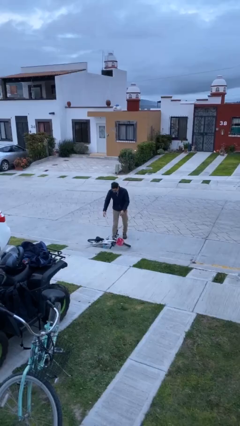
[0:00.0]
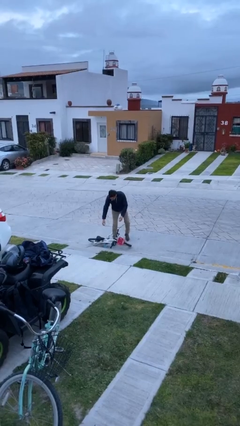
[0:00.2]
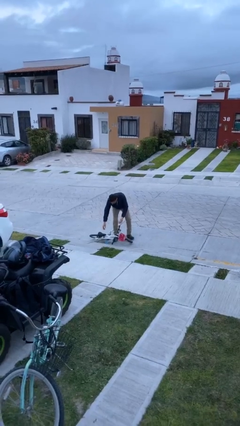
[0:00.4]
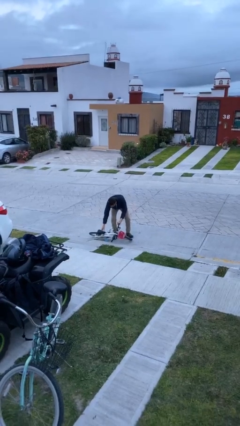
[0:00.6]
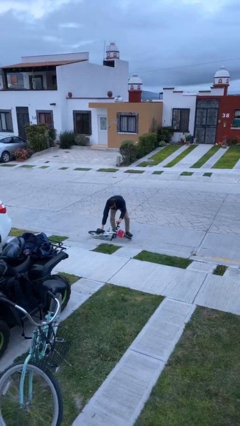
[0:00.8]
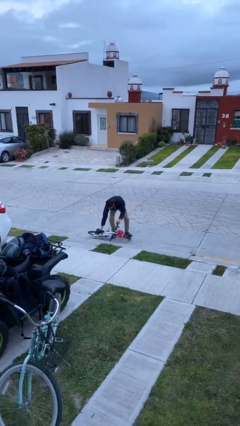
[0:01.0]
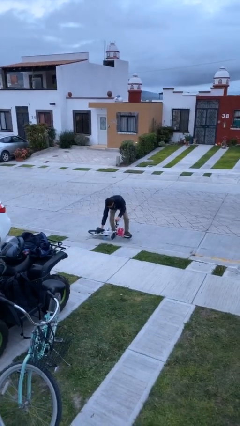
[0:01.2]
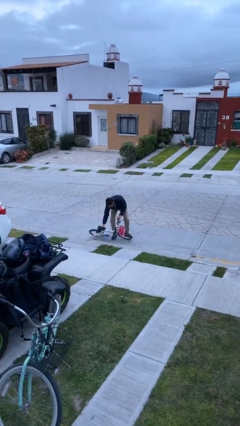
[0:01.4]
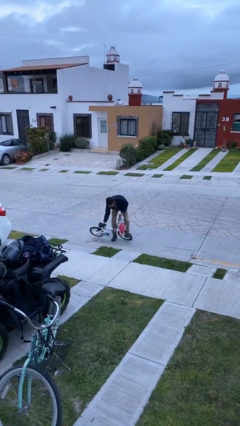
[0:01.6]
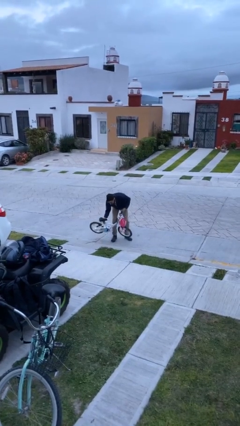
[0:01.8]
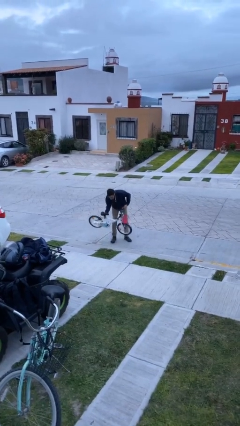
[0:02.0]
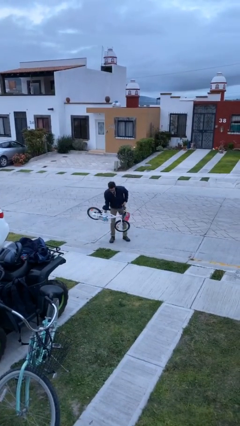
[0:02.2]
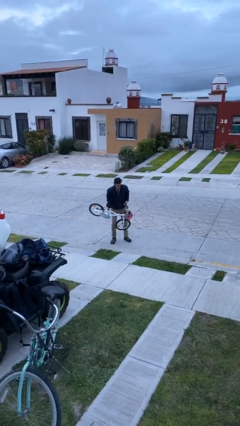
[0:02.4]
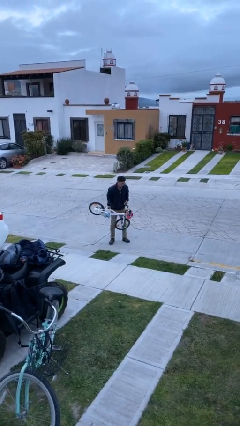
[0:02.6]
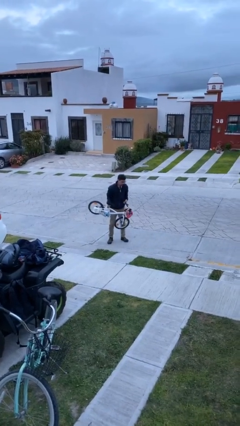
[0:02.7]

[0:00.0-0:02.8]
person picks up object from floor

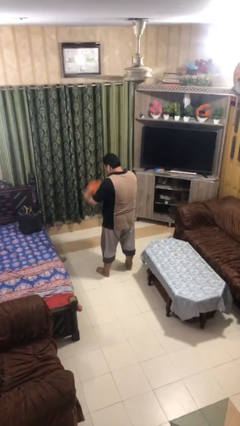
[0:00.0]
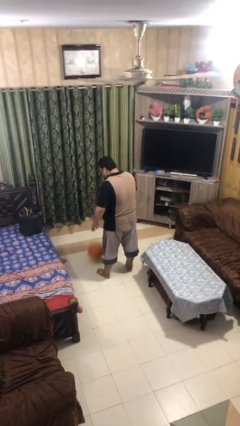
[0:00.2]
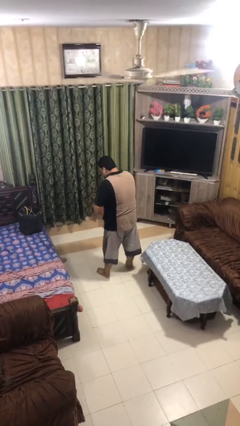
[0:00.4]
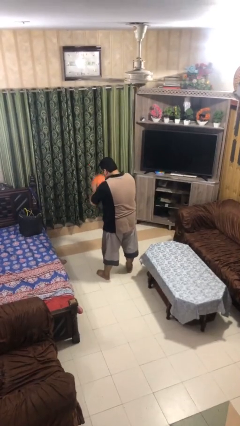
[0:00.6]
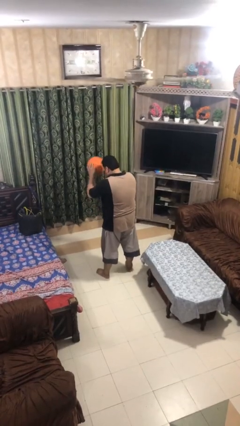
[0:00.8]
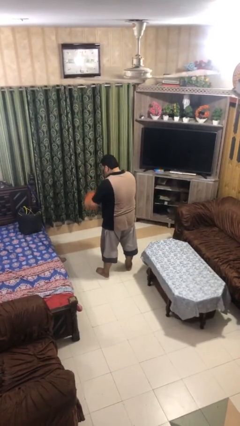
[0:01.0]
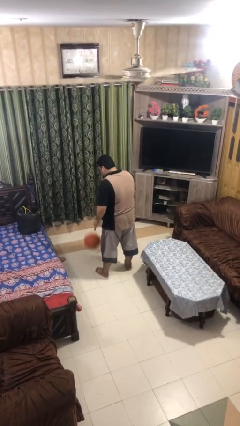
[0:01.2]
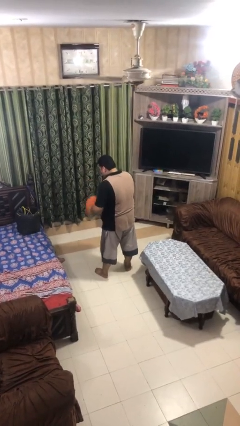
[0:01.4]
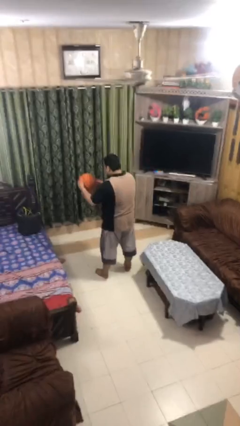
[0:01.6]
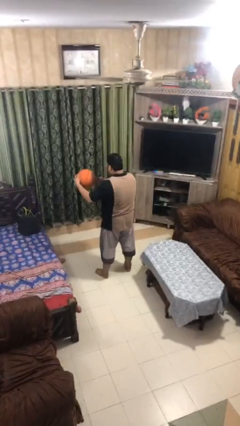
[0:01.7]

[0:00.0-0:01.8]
person bounces ball on floor

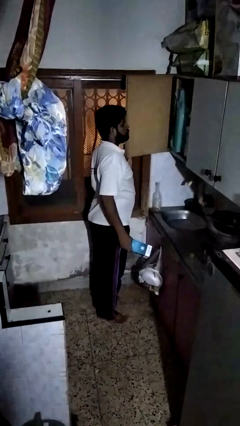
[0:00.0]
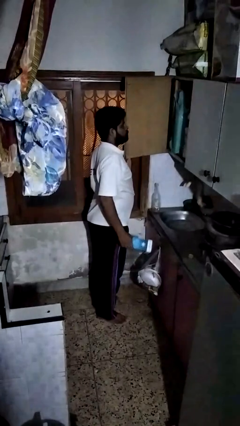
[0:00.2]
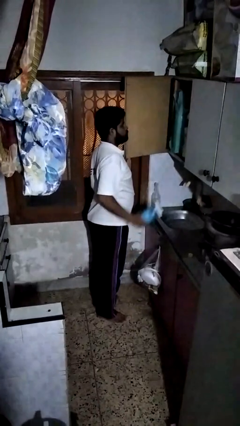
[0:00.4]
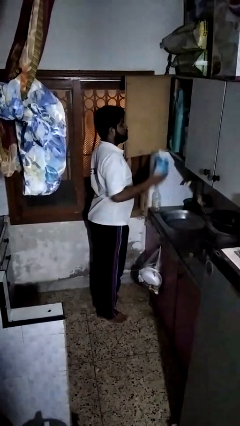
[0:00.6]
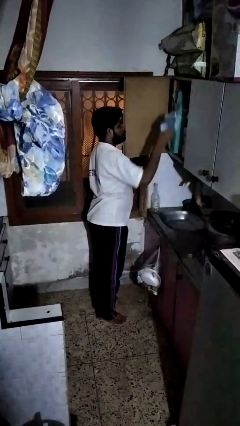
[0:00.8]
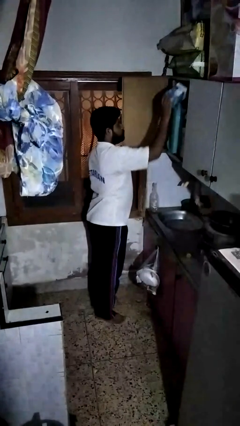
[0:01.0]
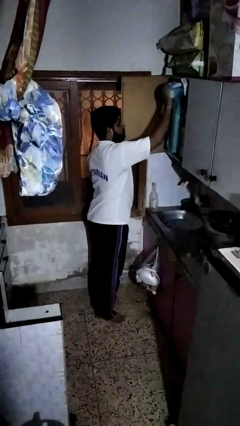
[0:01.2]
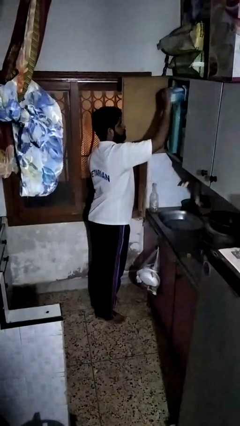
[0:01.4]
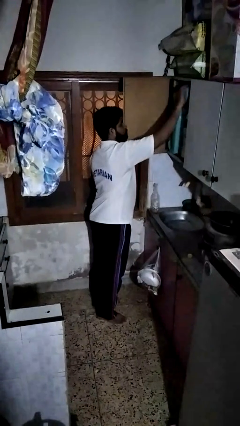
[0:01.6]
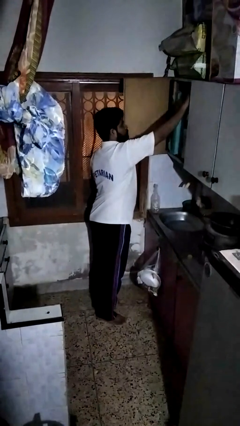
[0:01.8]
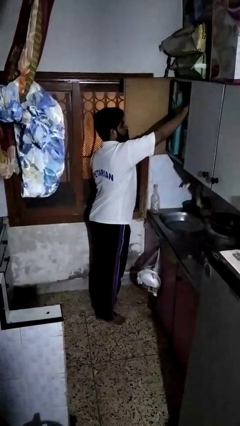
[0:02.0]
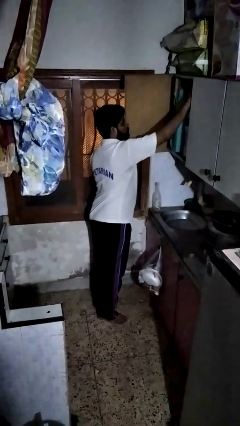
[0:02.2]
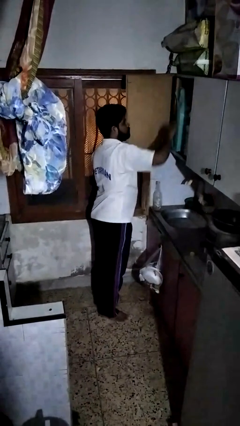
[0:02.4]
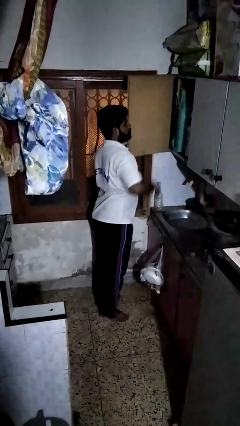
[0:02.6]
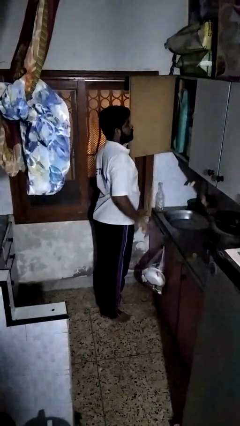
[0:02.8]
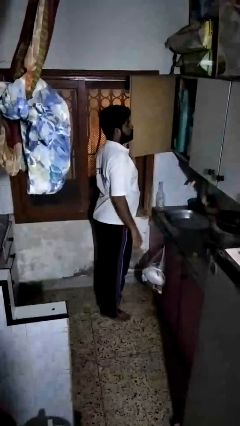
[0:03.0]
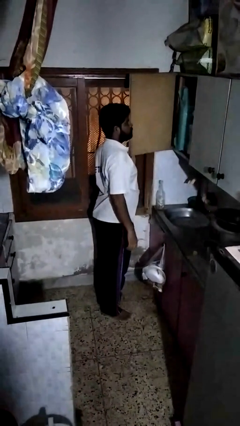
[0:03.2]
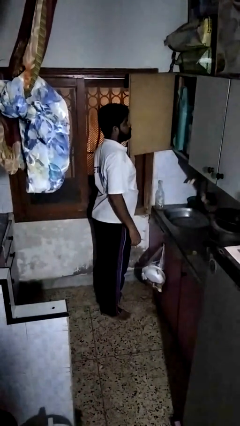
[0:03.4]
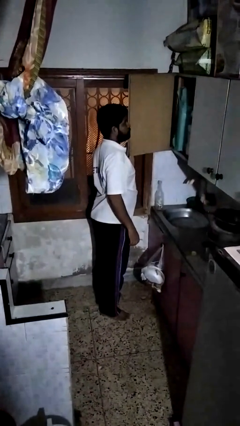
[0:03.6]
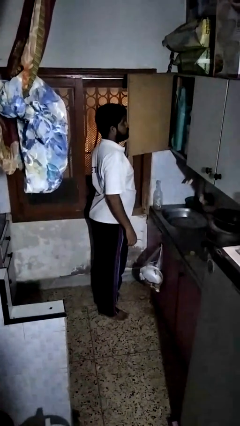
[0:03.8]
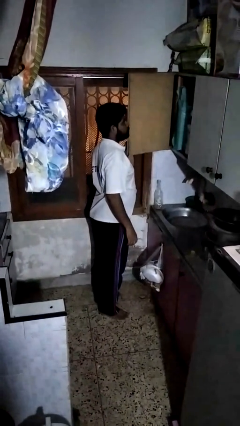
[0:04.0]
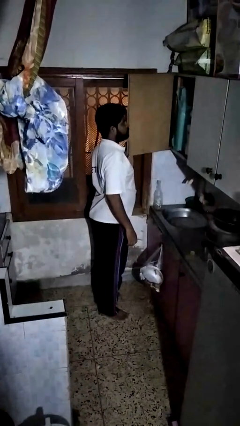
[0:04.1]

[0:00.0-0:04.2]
person puts down object into cabinet

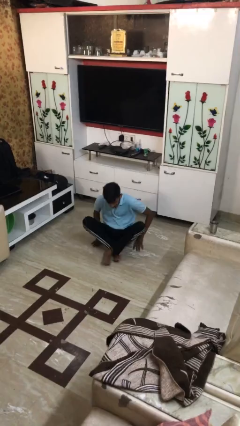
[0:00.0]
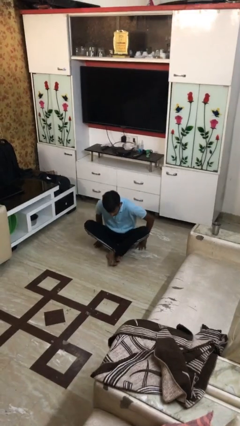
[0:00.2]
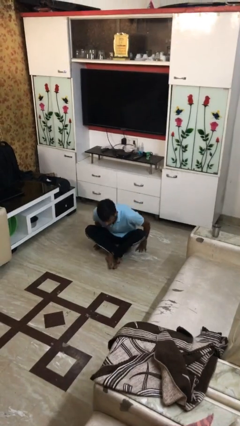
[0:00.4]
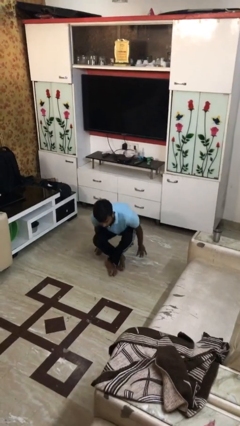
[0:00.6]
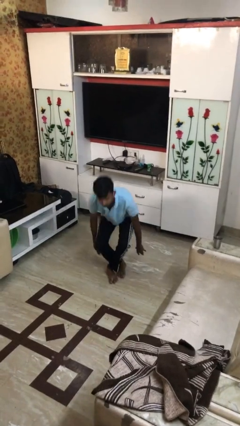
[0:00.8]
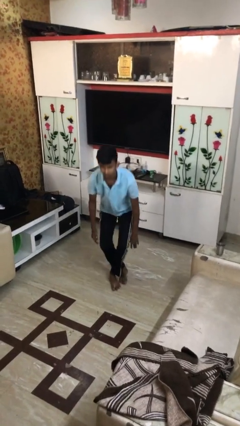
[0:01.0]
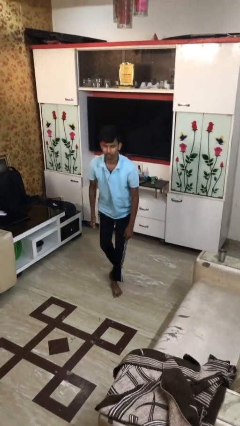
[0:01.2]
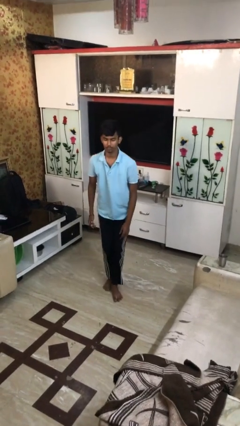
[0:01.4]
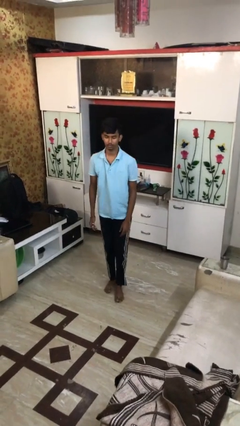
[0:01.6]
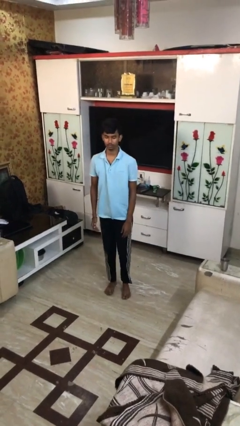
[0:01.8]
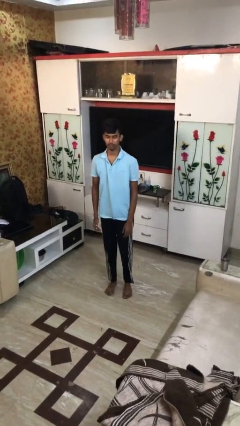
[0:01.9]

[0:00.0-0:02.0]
person stands up from floor

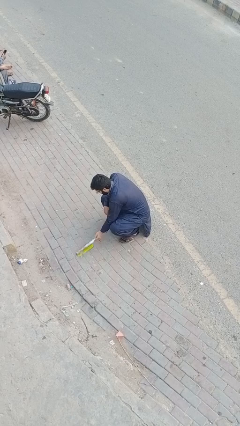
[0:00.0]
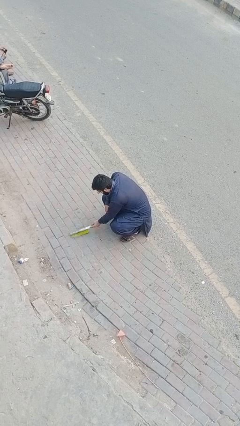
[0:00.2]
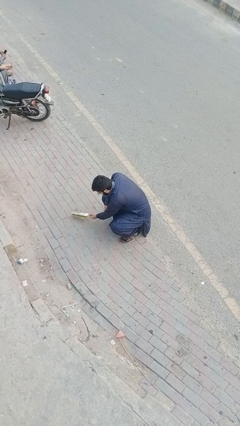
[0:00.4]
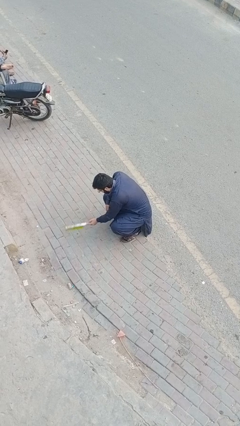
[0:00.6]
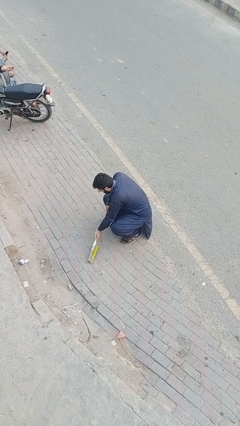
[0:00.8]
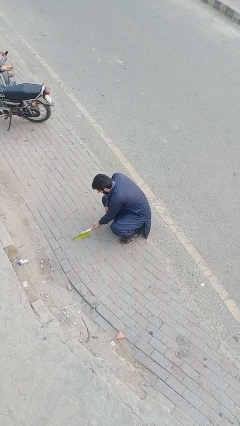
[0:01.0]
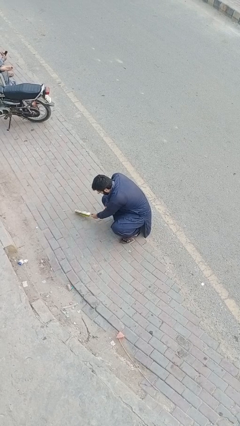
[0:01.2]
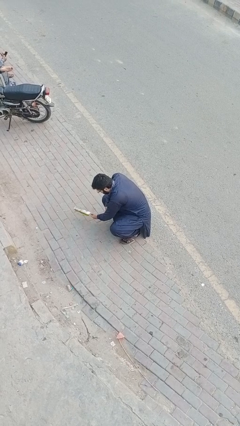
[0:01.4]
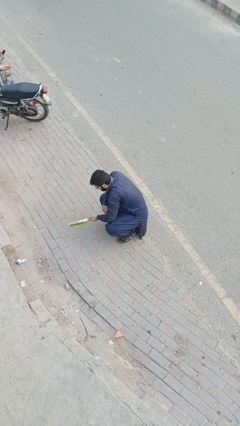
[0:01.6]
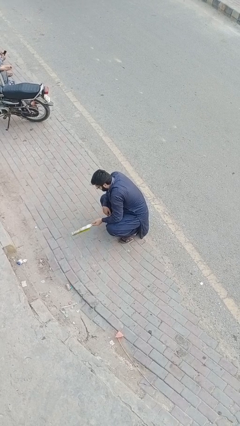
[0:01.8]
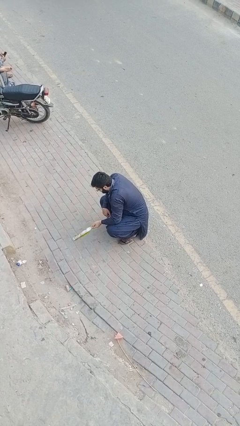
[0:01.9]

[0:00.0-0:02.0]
person sweeps floor

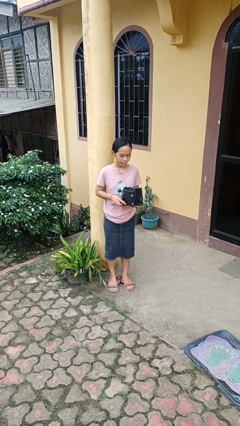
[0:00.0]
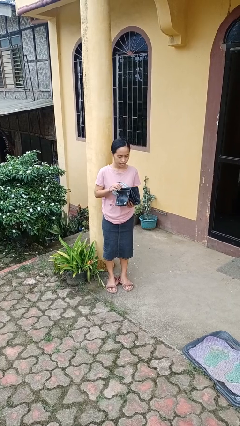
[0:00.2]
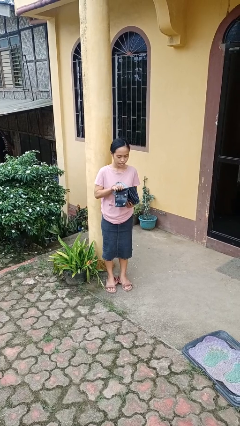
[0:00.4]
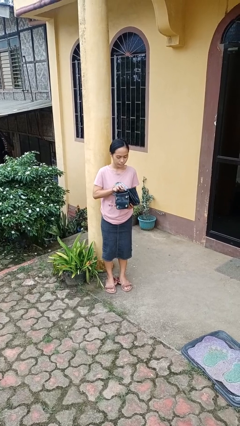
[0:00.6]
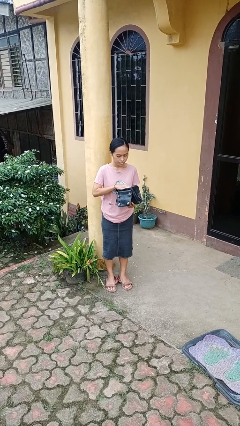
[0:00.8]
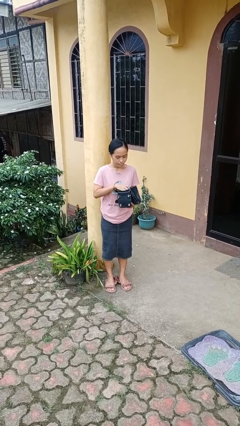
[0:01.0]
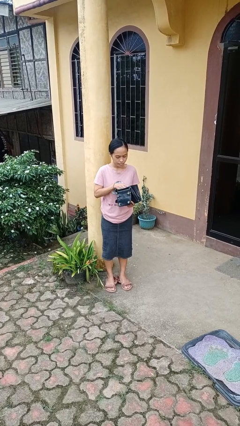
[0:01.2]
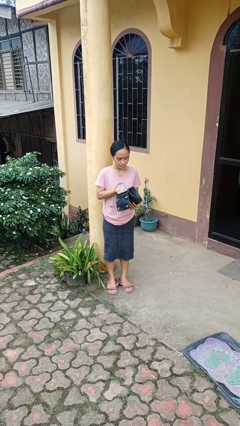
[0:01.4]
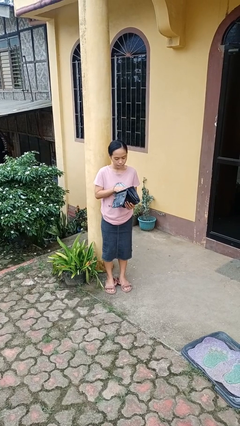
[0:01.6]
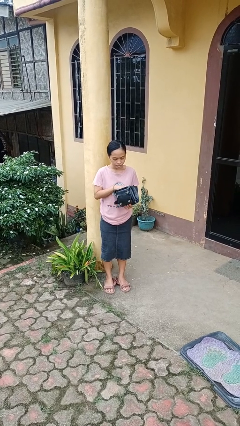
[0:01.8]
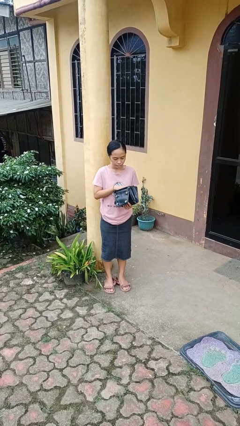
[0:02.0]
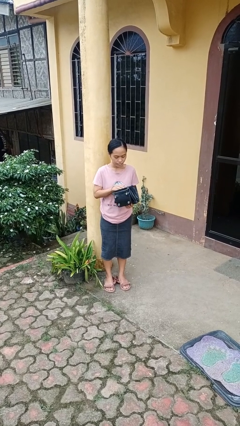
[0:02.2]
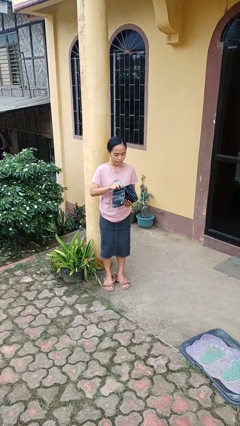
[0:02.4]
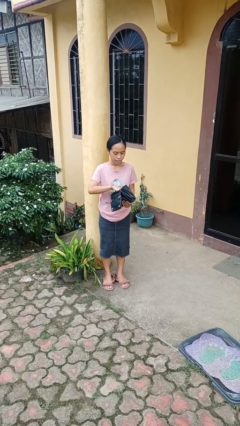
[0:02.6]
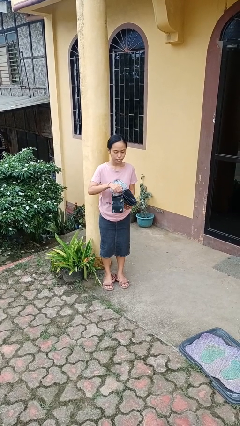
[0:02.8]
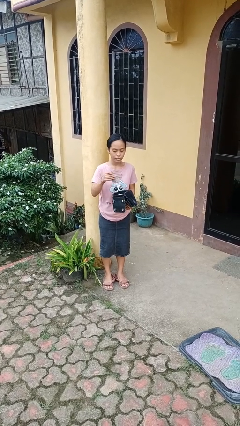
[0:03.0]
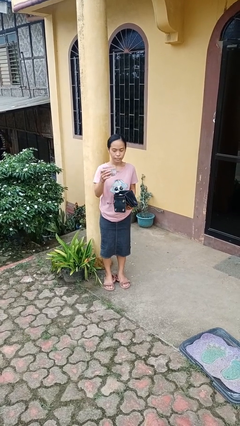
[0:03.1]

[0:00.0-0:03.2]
person searches in purse

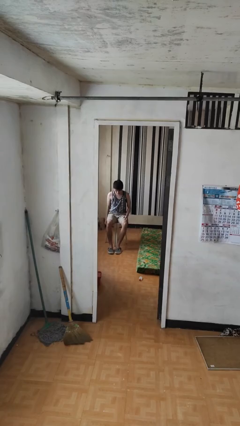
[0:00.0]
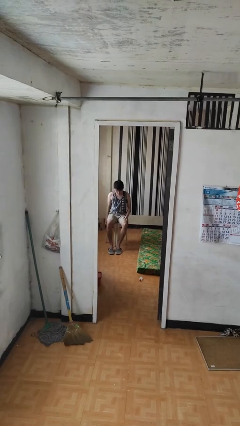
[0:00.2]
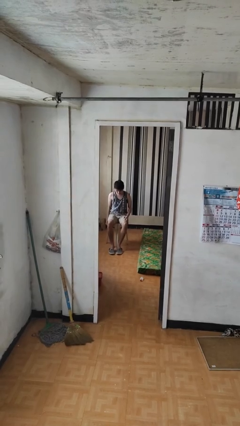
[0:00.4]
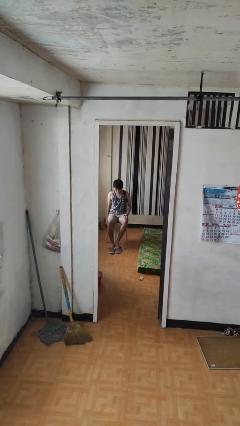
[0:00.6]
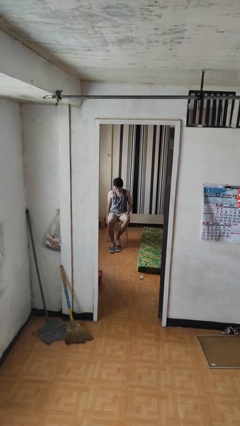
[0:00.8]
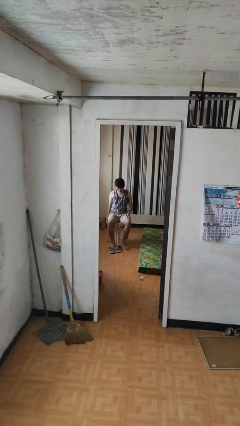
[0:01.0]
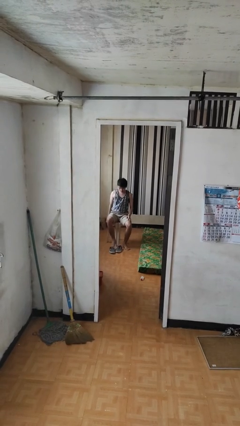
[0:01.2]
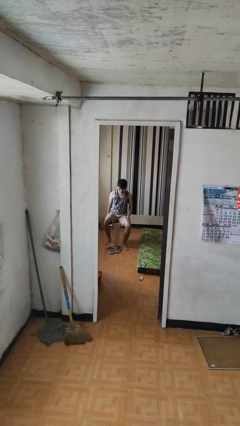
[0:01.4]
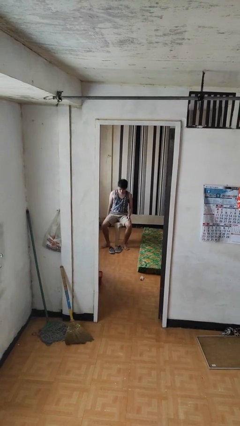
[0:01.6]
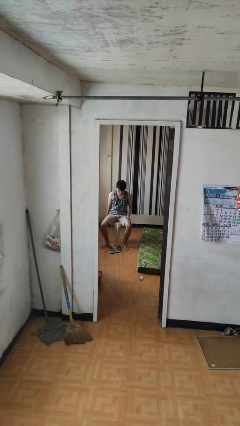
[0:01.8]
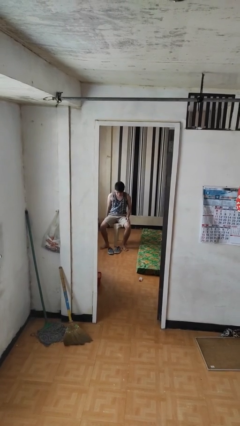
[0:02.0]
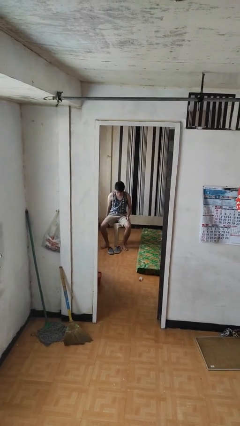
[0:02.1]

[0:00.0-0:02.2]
person takes off shoes
